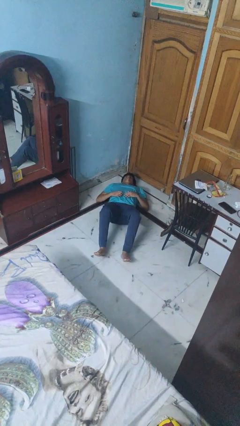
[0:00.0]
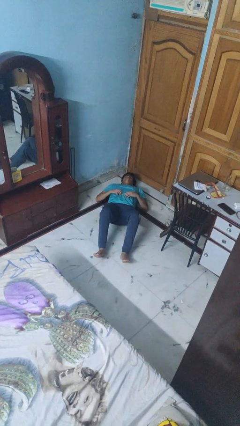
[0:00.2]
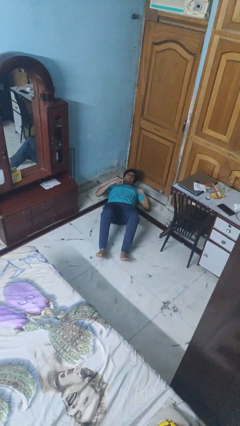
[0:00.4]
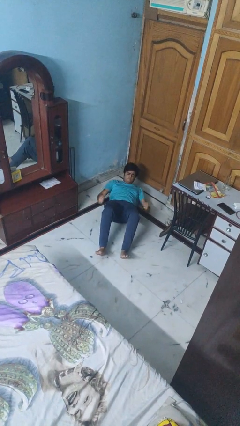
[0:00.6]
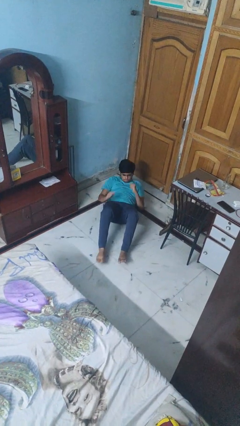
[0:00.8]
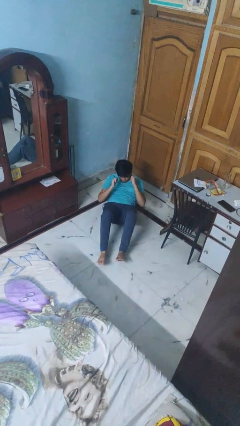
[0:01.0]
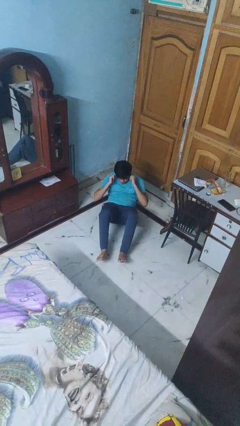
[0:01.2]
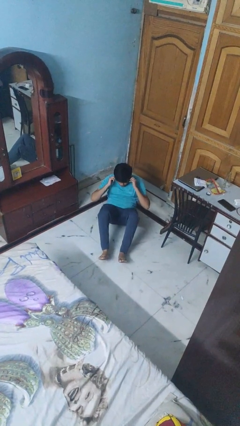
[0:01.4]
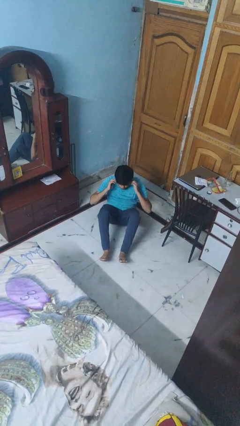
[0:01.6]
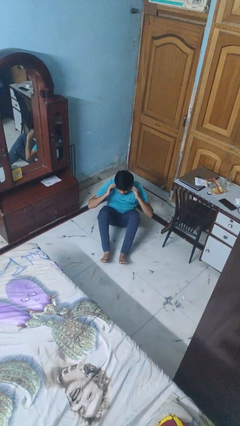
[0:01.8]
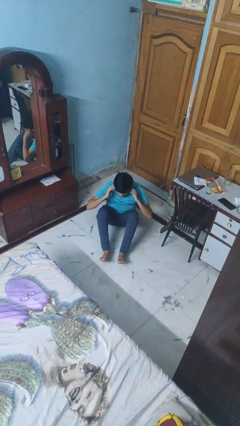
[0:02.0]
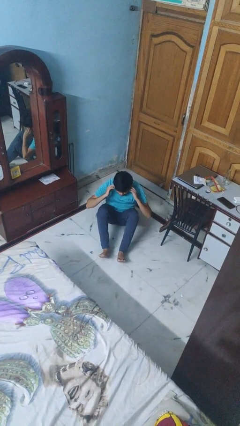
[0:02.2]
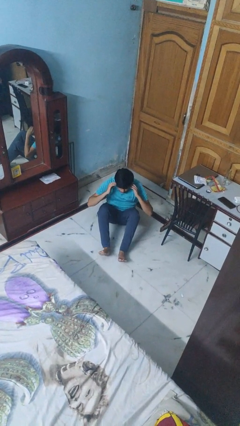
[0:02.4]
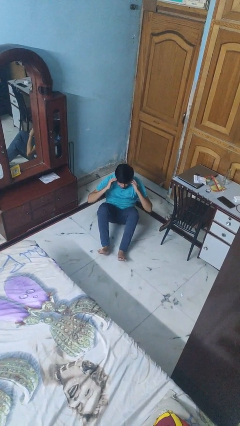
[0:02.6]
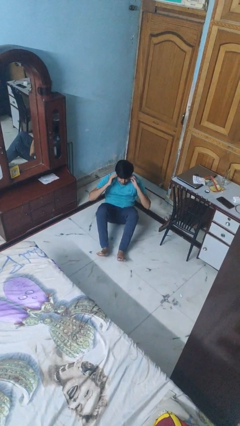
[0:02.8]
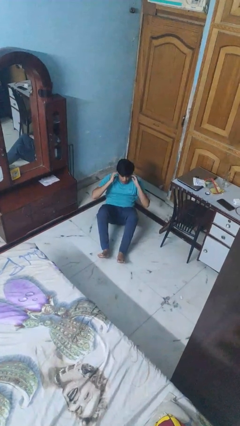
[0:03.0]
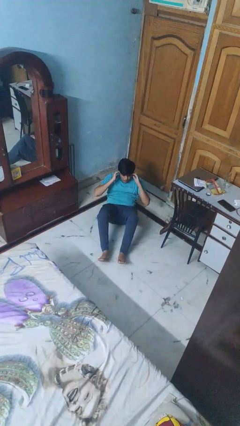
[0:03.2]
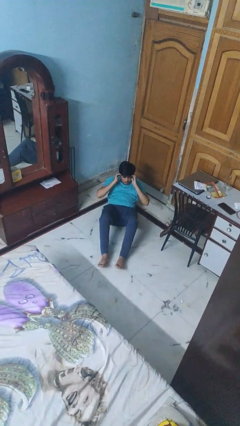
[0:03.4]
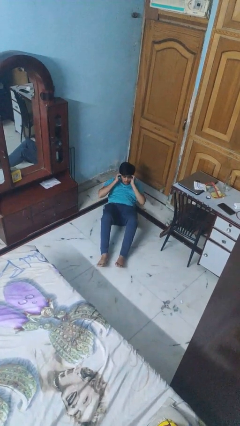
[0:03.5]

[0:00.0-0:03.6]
person exercises with situp

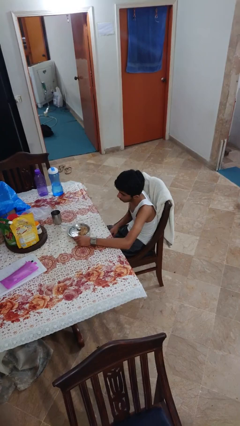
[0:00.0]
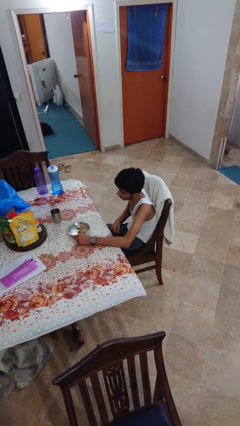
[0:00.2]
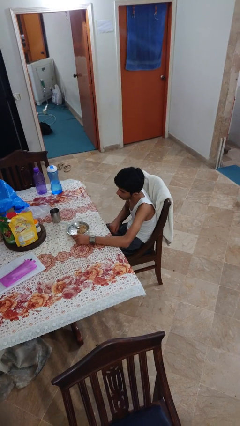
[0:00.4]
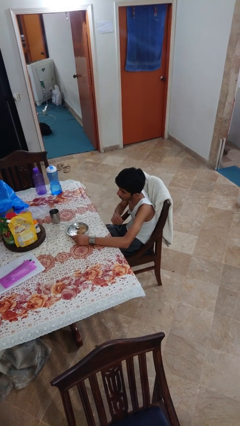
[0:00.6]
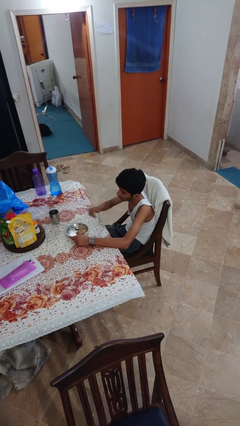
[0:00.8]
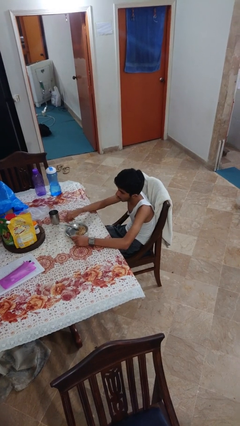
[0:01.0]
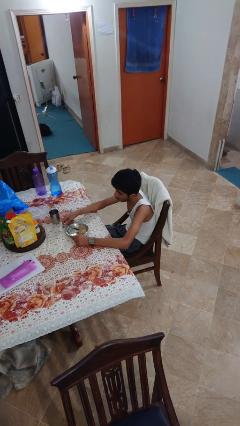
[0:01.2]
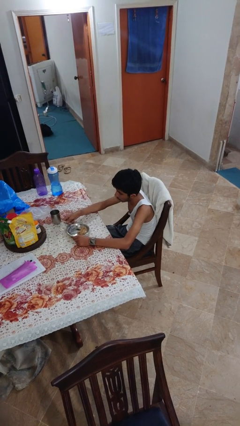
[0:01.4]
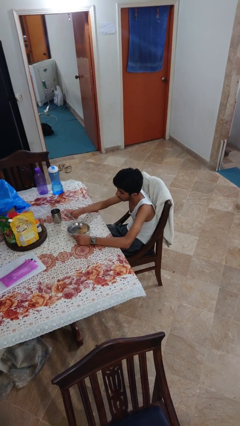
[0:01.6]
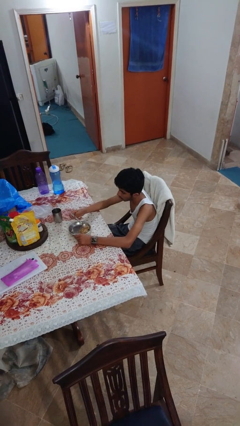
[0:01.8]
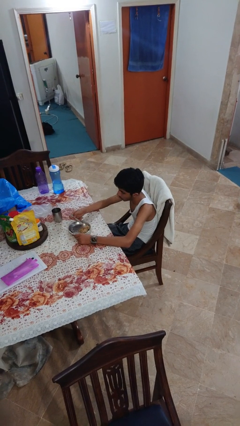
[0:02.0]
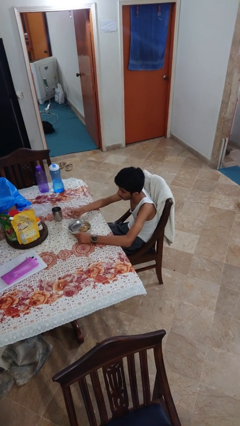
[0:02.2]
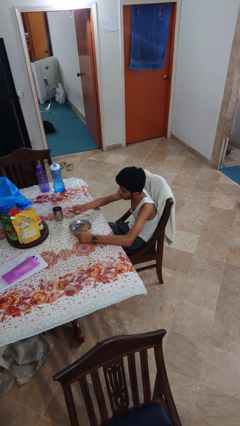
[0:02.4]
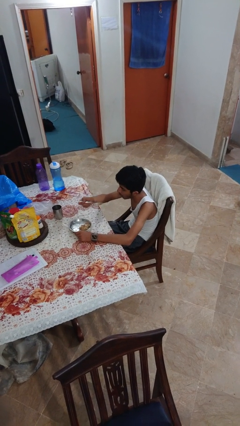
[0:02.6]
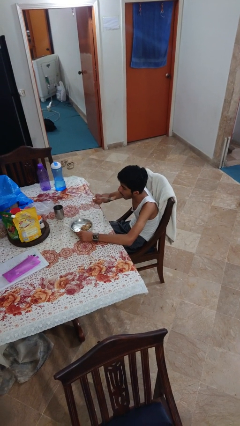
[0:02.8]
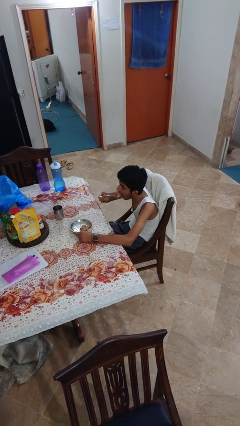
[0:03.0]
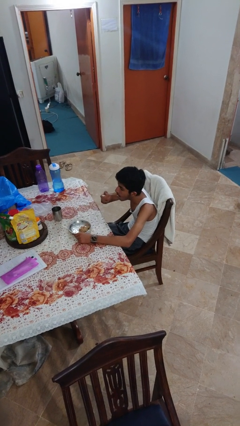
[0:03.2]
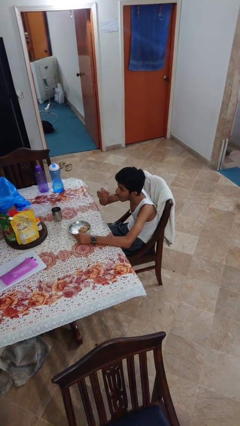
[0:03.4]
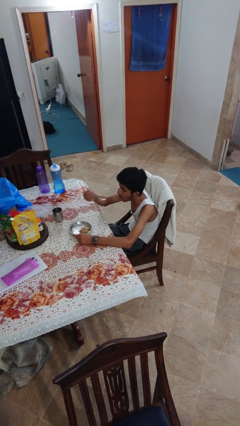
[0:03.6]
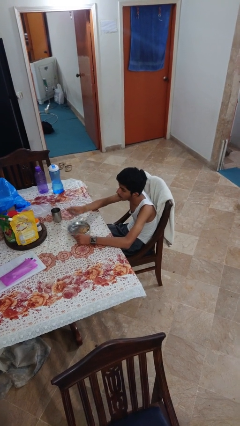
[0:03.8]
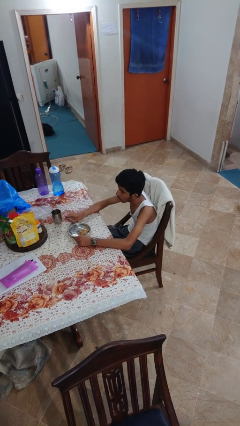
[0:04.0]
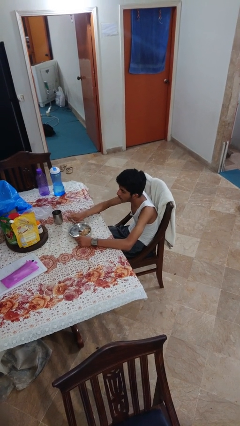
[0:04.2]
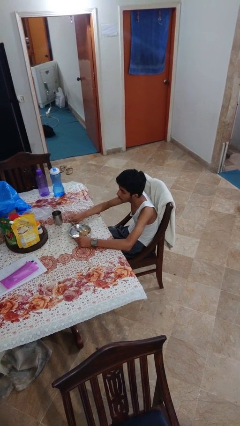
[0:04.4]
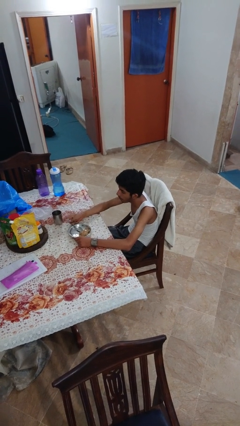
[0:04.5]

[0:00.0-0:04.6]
person eats with utensil

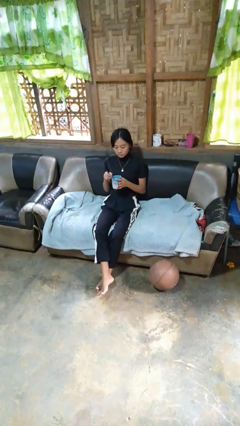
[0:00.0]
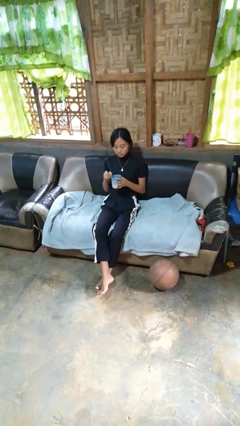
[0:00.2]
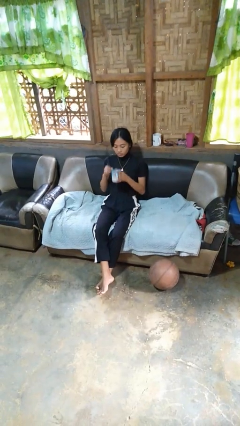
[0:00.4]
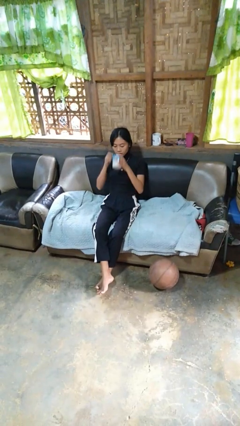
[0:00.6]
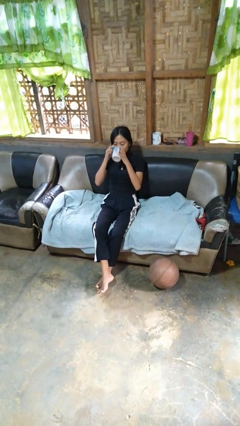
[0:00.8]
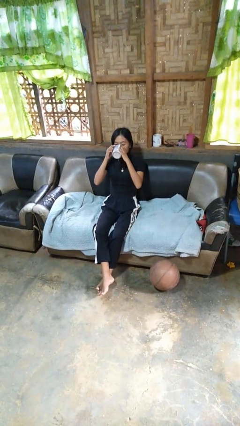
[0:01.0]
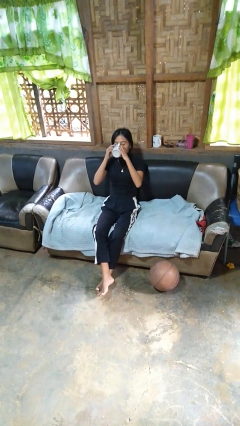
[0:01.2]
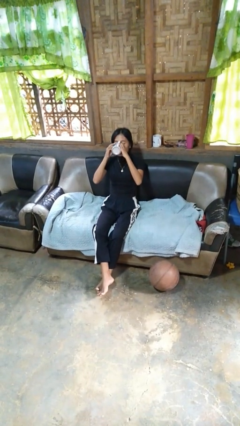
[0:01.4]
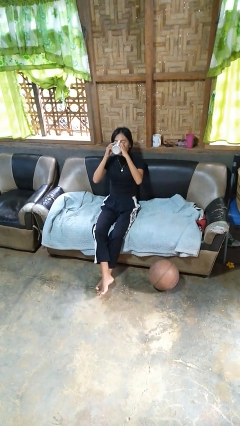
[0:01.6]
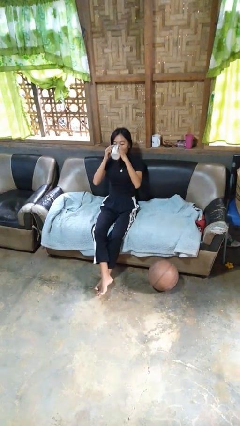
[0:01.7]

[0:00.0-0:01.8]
person drinks from mug

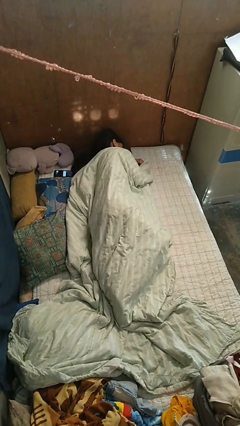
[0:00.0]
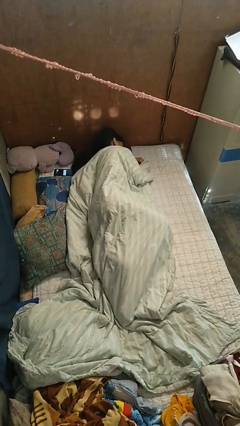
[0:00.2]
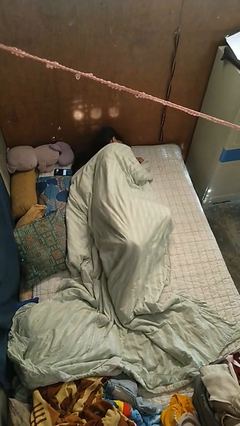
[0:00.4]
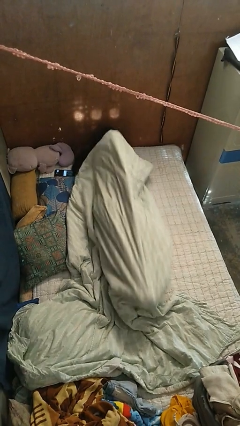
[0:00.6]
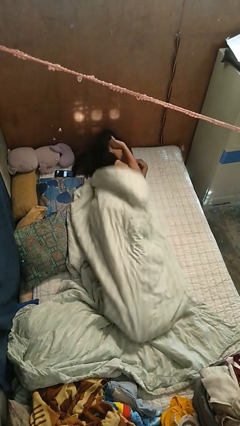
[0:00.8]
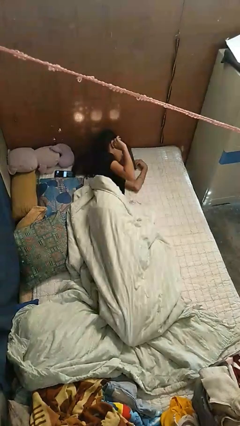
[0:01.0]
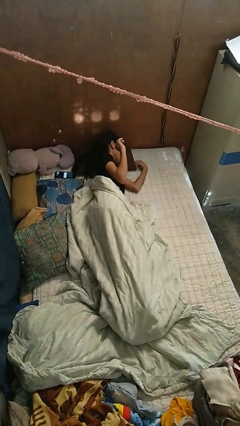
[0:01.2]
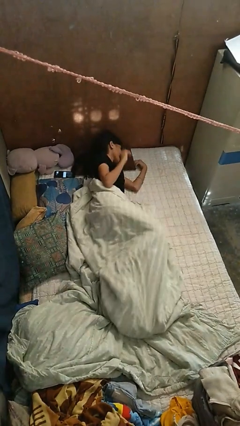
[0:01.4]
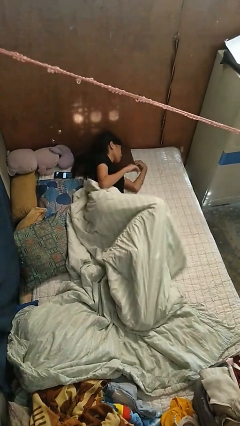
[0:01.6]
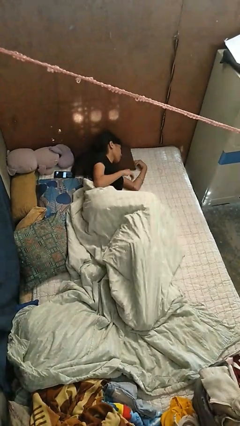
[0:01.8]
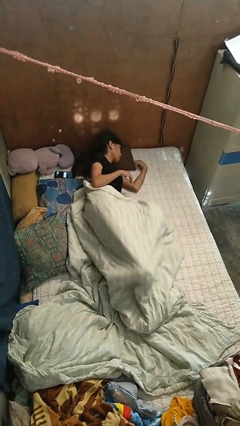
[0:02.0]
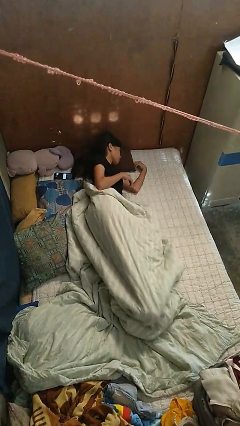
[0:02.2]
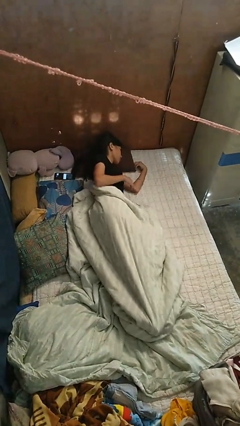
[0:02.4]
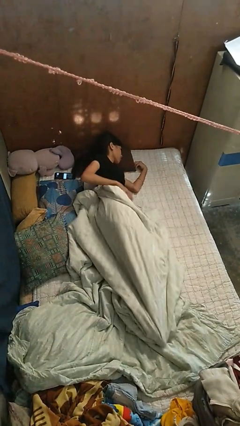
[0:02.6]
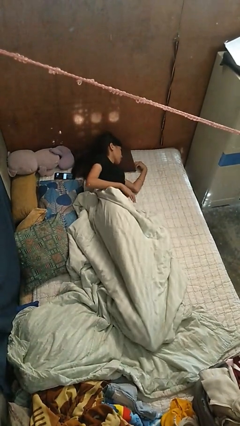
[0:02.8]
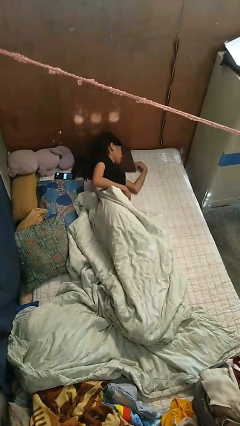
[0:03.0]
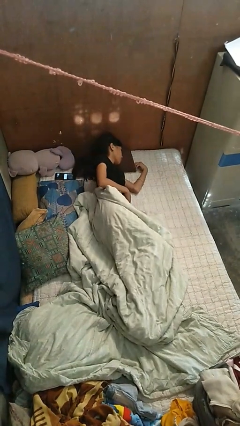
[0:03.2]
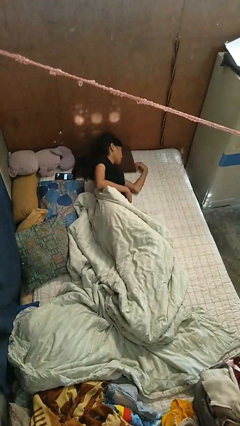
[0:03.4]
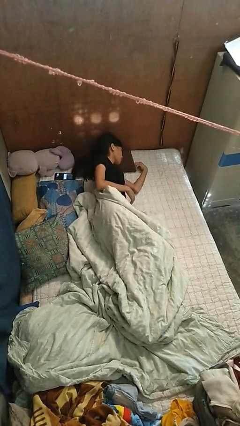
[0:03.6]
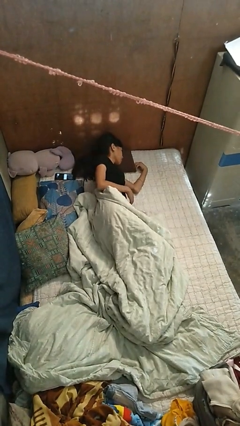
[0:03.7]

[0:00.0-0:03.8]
person uncovers with bedsheets

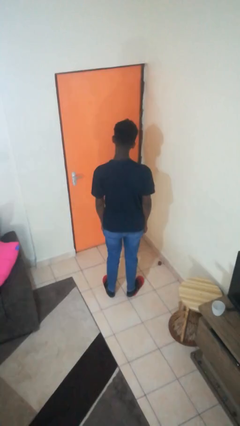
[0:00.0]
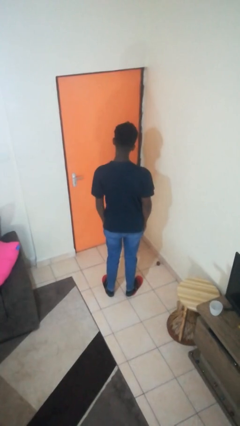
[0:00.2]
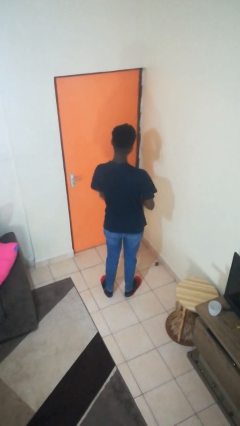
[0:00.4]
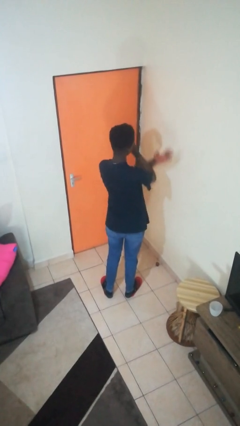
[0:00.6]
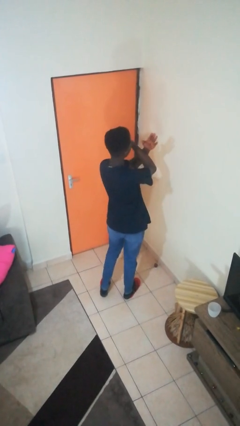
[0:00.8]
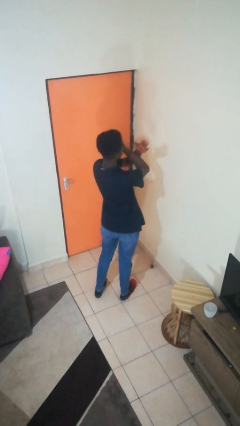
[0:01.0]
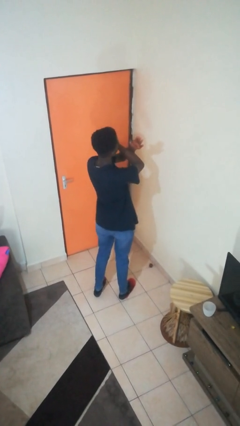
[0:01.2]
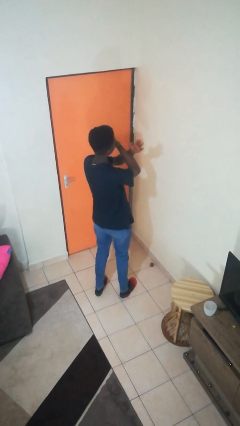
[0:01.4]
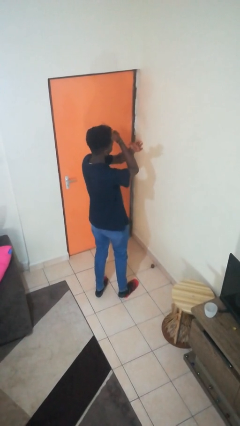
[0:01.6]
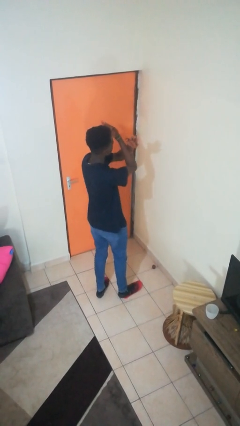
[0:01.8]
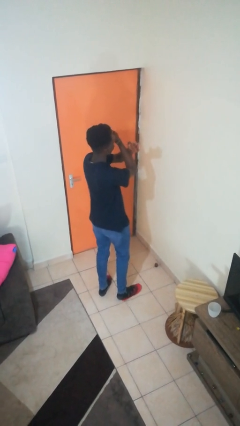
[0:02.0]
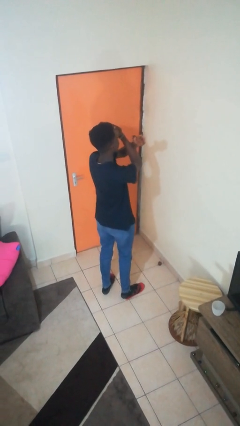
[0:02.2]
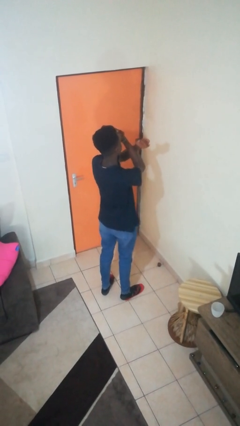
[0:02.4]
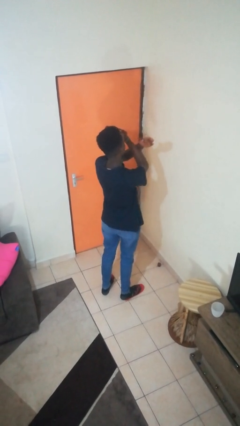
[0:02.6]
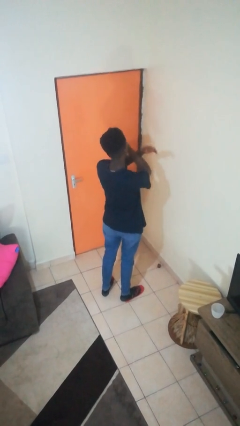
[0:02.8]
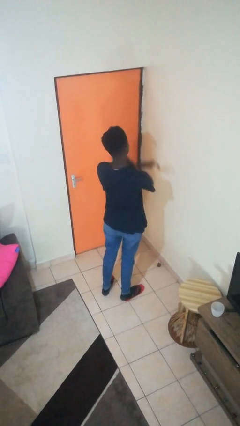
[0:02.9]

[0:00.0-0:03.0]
person gestures arms x

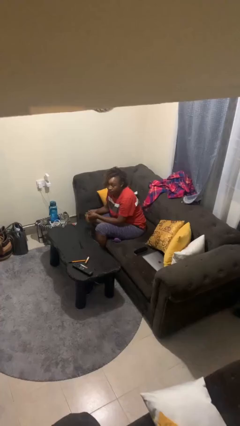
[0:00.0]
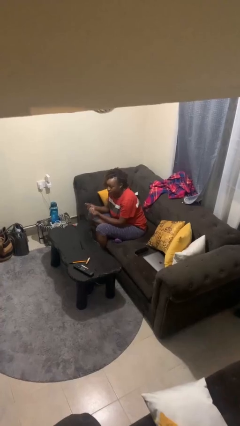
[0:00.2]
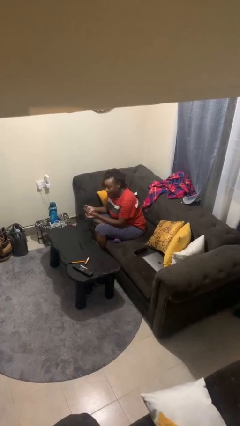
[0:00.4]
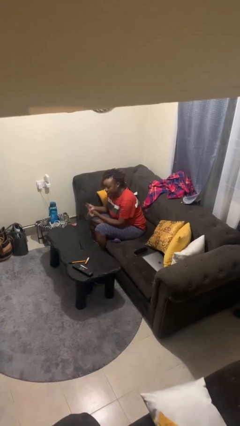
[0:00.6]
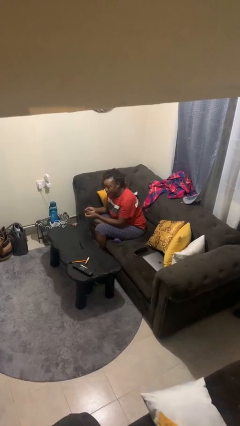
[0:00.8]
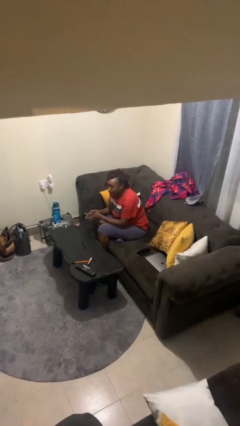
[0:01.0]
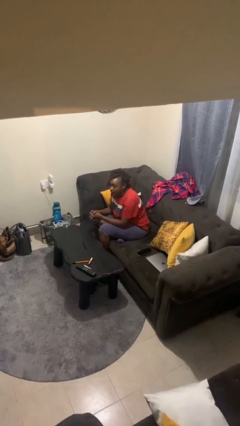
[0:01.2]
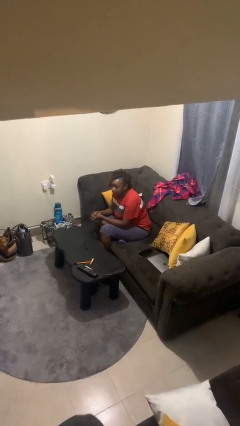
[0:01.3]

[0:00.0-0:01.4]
person snaps fingers
